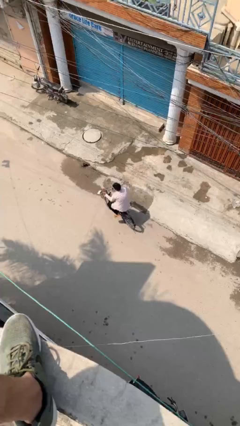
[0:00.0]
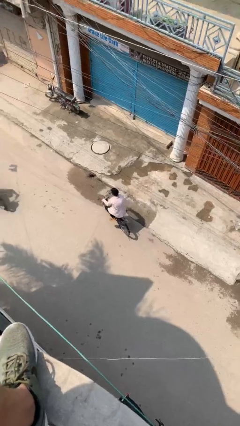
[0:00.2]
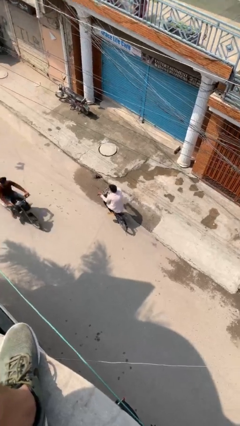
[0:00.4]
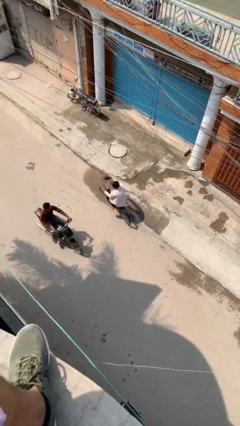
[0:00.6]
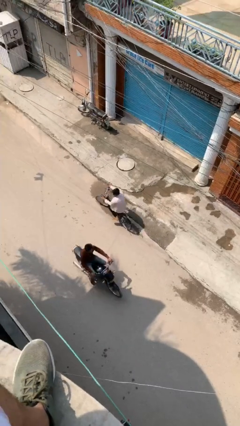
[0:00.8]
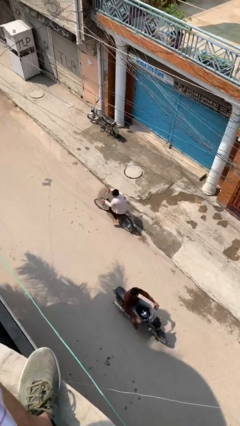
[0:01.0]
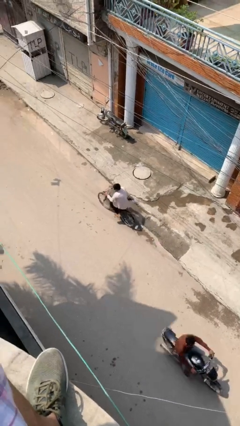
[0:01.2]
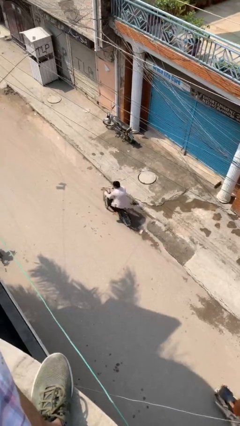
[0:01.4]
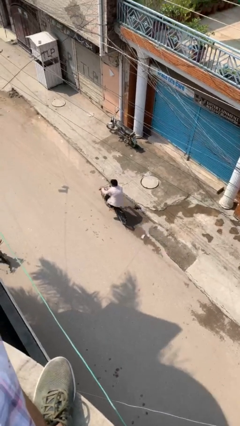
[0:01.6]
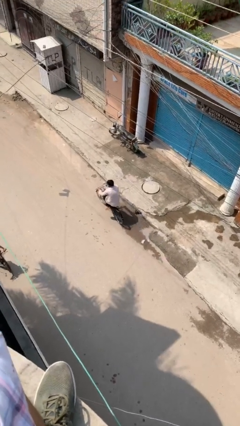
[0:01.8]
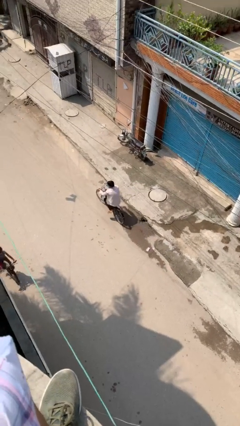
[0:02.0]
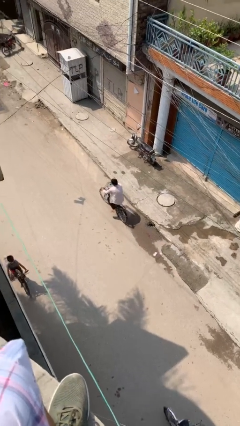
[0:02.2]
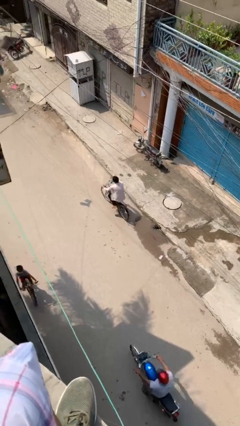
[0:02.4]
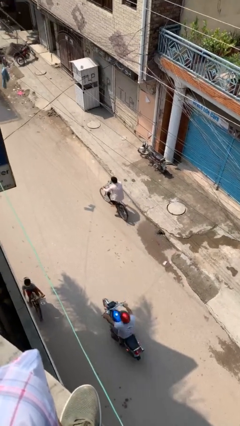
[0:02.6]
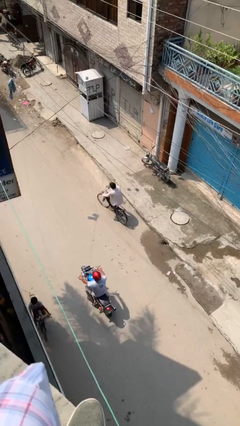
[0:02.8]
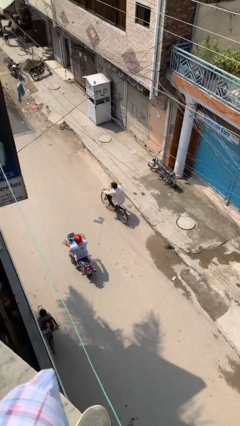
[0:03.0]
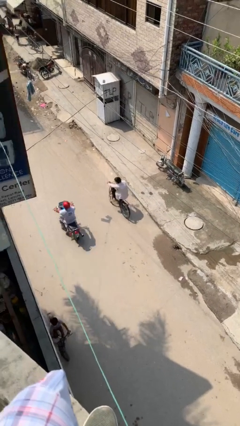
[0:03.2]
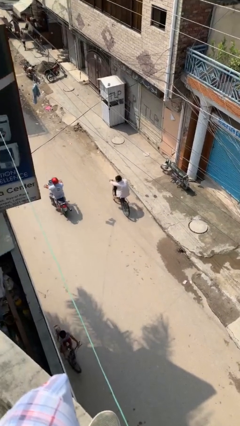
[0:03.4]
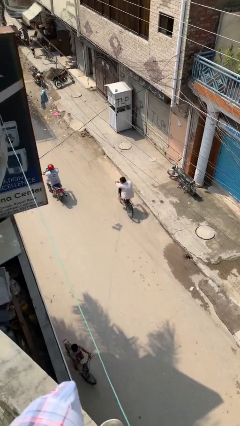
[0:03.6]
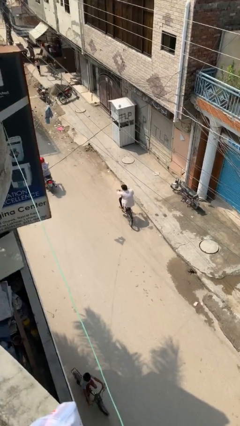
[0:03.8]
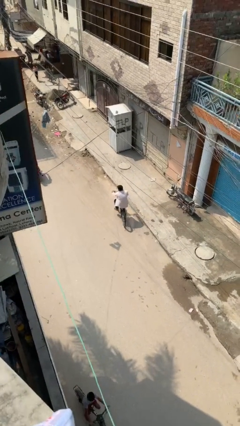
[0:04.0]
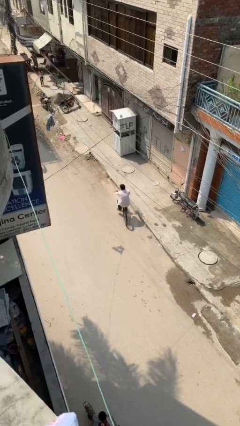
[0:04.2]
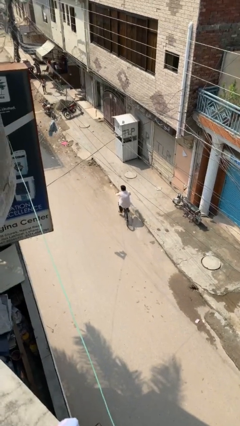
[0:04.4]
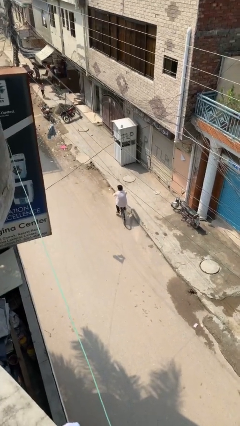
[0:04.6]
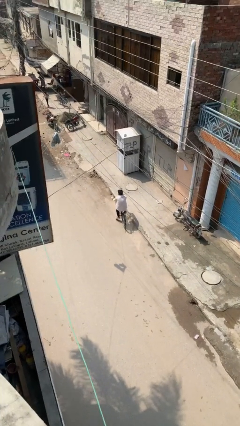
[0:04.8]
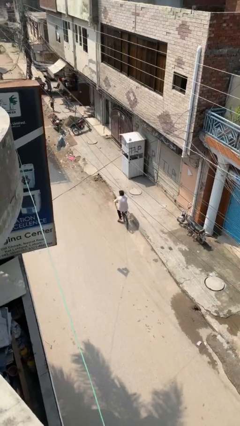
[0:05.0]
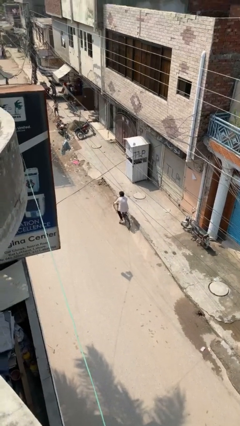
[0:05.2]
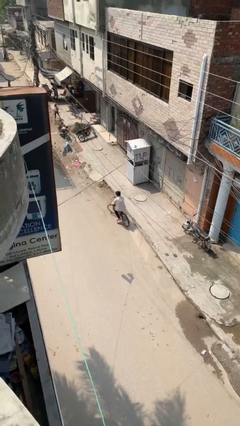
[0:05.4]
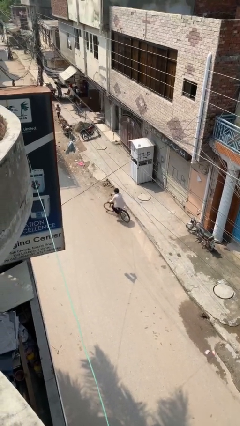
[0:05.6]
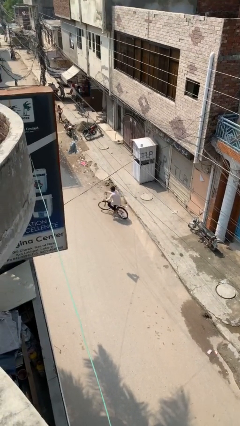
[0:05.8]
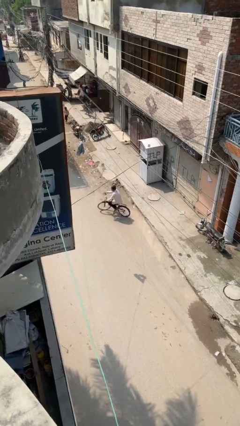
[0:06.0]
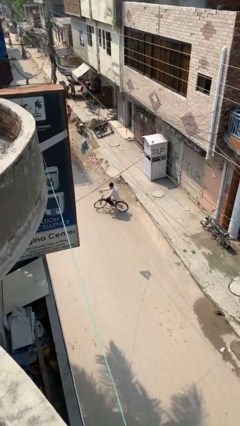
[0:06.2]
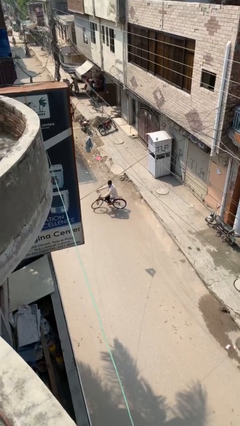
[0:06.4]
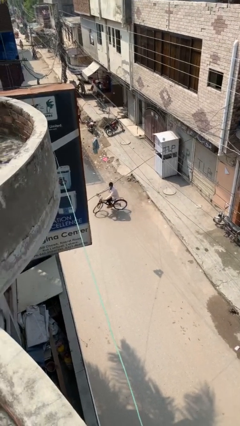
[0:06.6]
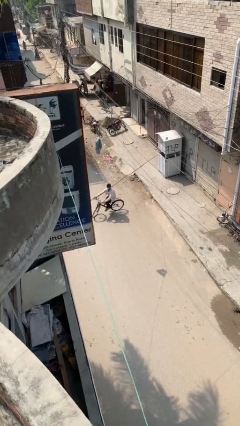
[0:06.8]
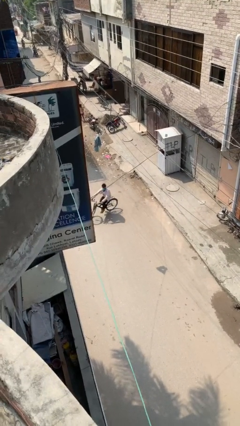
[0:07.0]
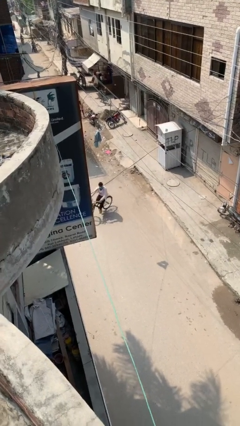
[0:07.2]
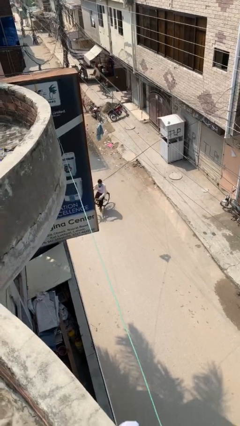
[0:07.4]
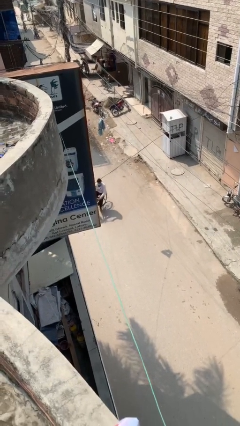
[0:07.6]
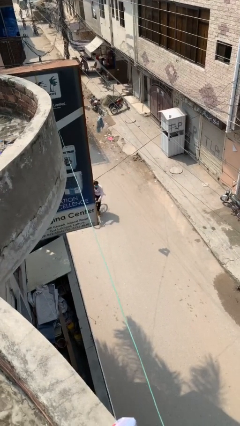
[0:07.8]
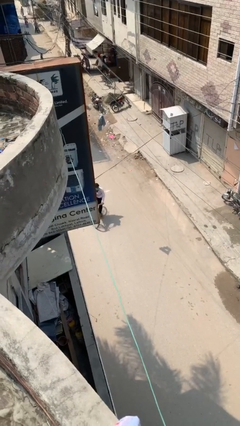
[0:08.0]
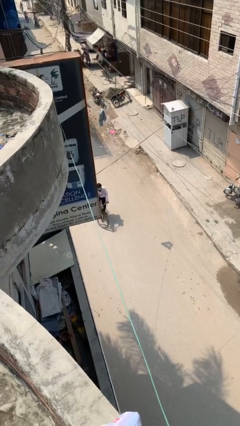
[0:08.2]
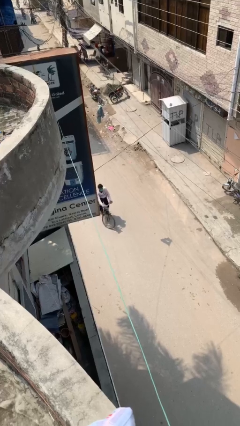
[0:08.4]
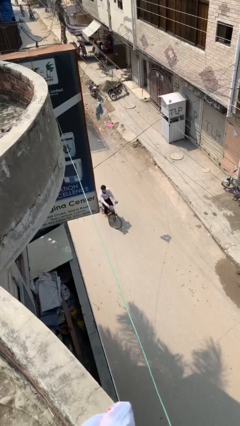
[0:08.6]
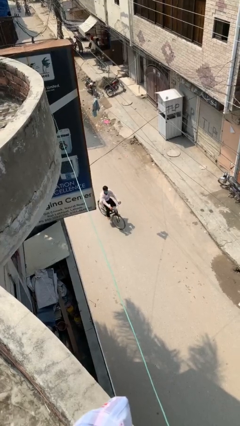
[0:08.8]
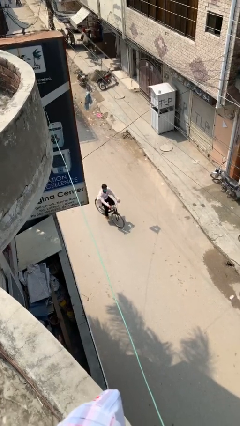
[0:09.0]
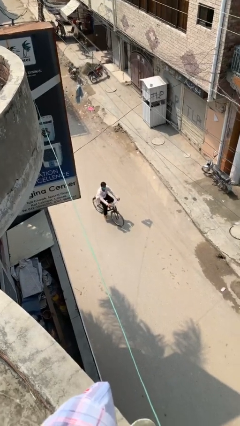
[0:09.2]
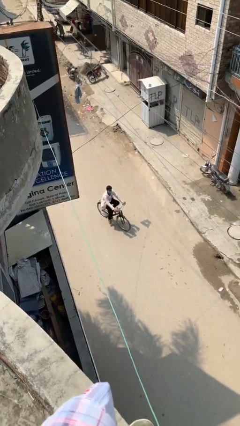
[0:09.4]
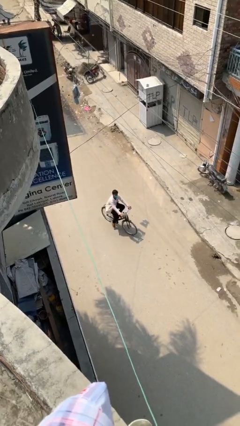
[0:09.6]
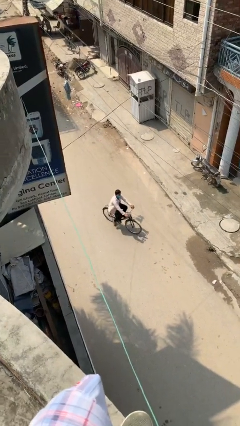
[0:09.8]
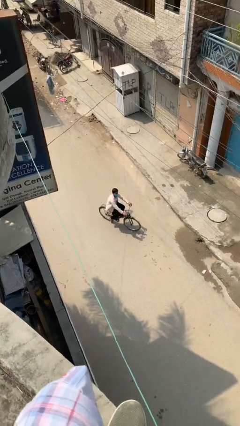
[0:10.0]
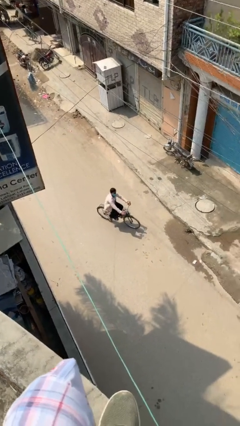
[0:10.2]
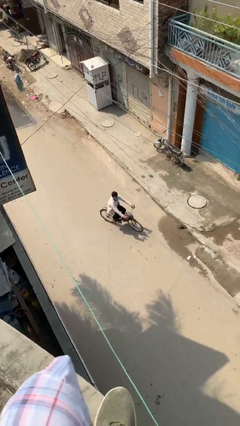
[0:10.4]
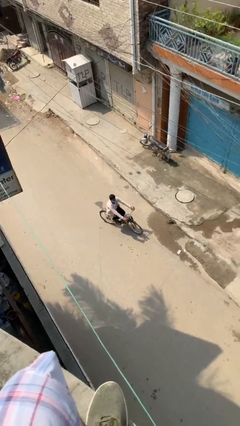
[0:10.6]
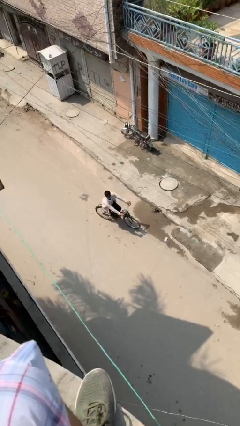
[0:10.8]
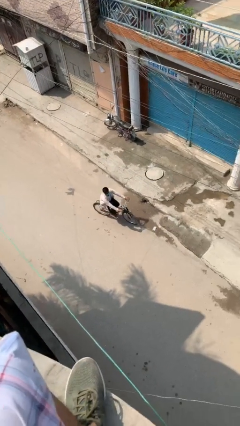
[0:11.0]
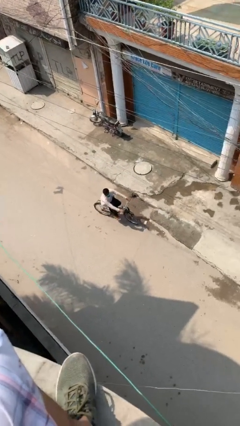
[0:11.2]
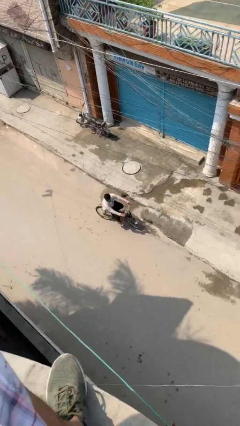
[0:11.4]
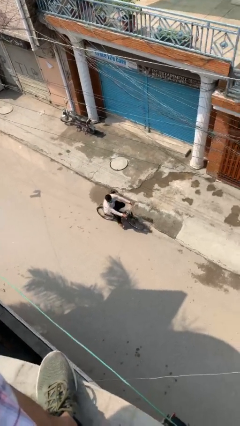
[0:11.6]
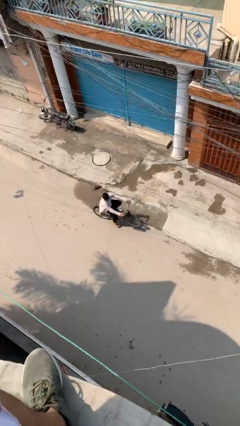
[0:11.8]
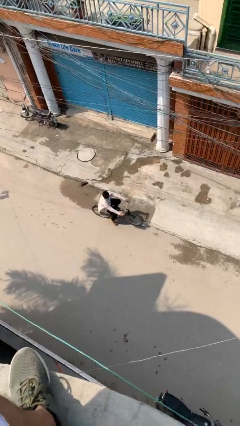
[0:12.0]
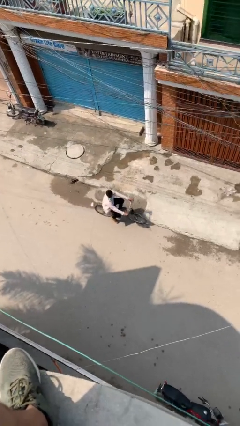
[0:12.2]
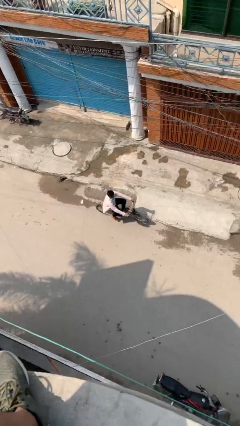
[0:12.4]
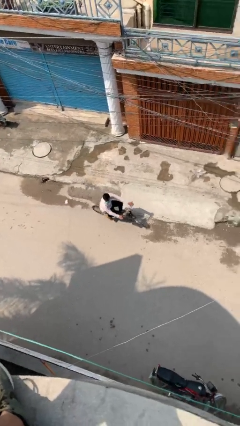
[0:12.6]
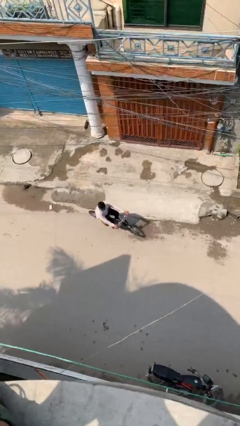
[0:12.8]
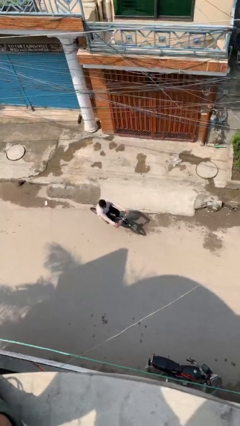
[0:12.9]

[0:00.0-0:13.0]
person rides bicycle

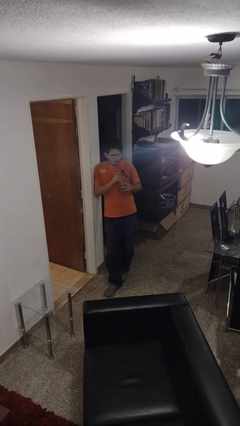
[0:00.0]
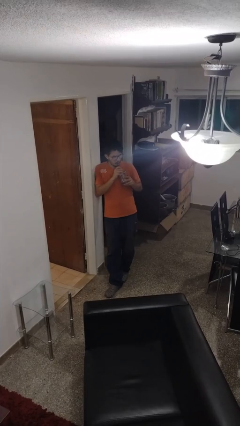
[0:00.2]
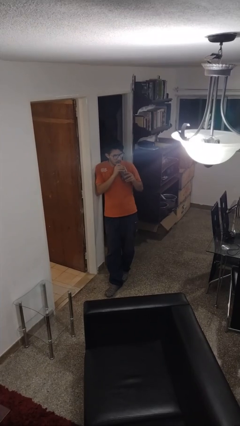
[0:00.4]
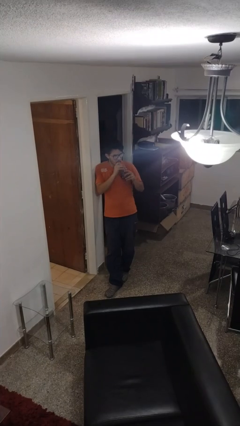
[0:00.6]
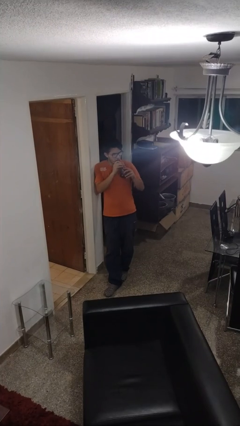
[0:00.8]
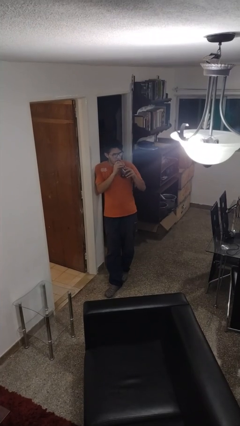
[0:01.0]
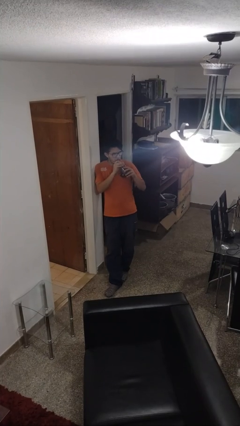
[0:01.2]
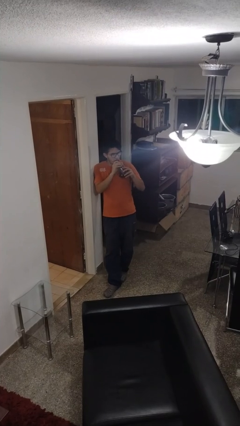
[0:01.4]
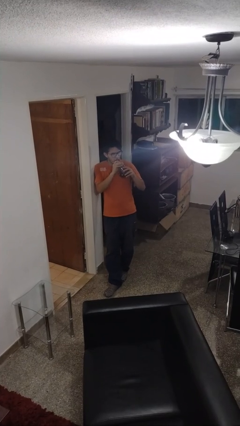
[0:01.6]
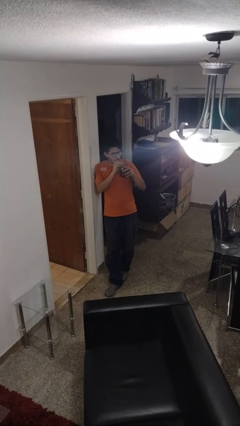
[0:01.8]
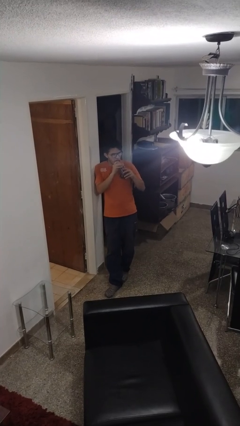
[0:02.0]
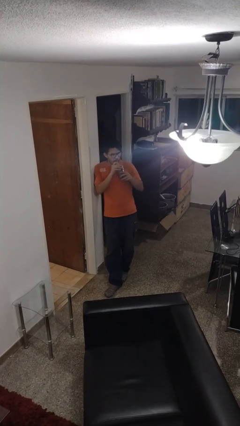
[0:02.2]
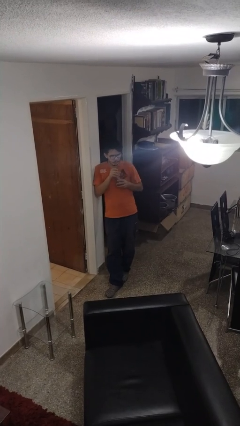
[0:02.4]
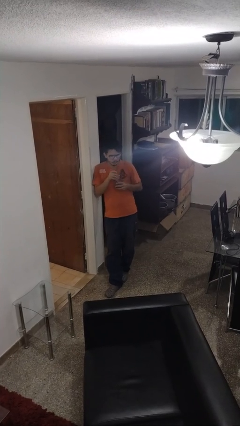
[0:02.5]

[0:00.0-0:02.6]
person drinks from straw

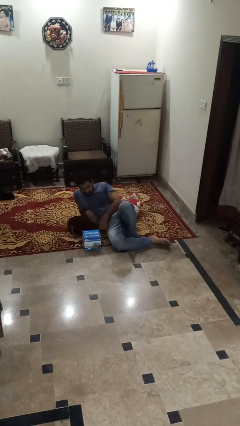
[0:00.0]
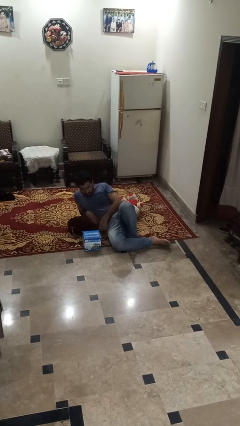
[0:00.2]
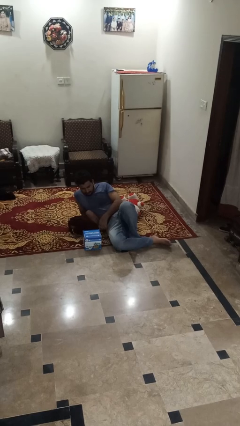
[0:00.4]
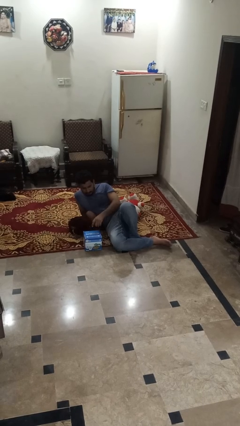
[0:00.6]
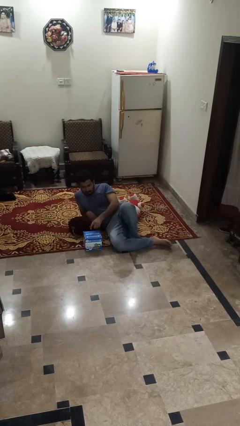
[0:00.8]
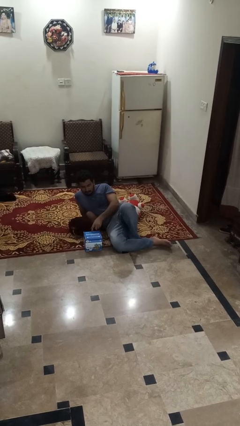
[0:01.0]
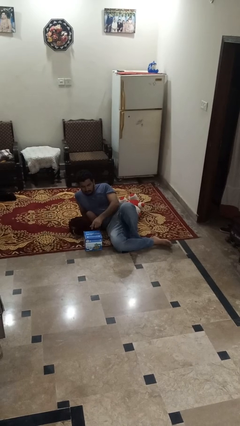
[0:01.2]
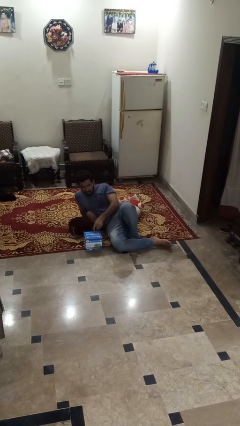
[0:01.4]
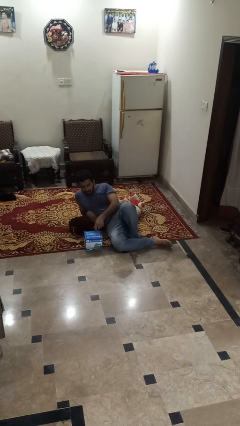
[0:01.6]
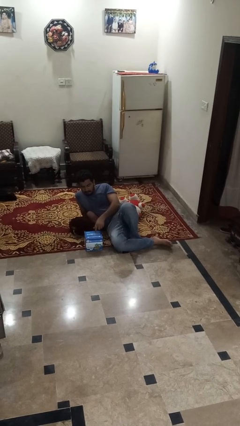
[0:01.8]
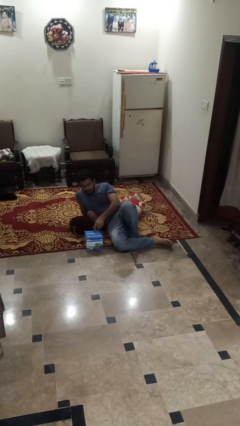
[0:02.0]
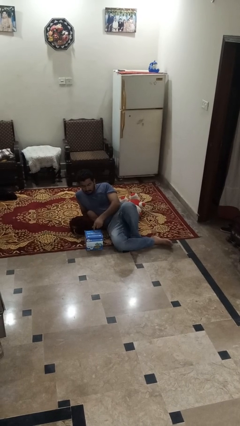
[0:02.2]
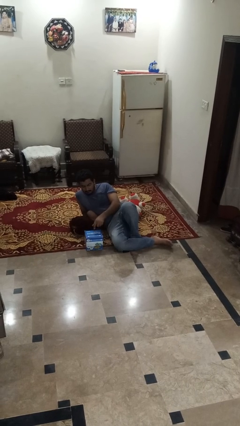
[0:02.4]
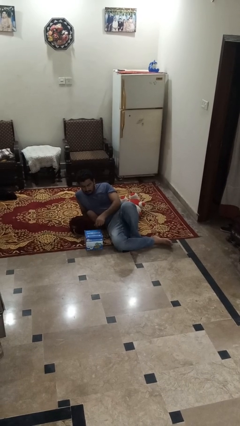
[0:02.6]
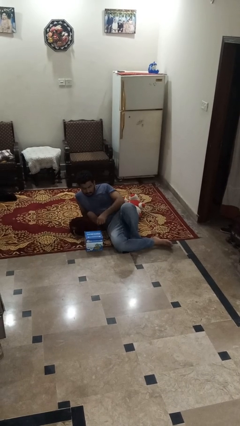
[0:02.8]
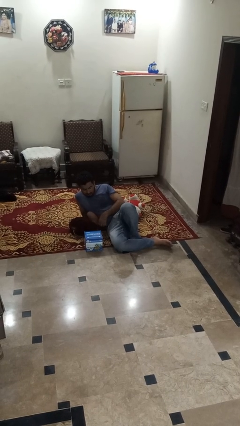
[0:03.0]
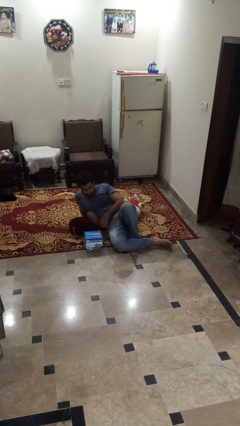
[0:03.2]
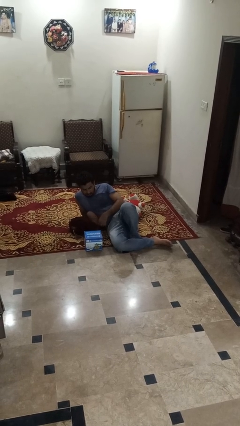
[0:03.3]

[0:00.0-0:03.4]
person taps object with finger
